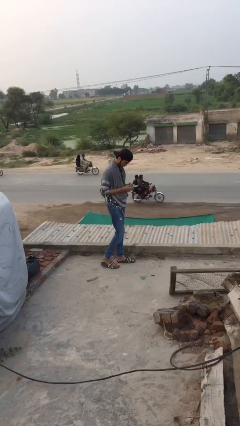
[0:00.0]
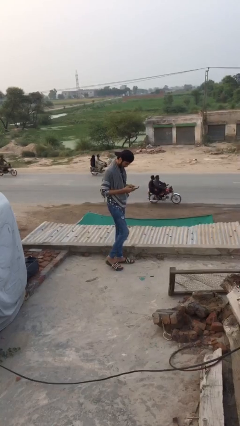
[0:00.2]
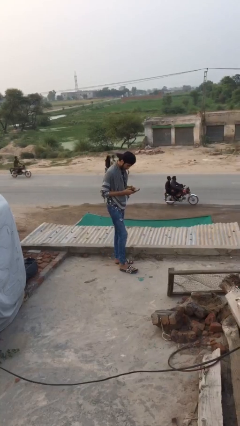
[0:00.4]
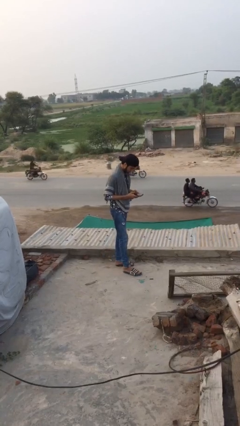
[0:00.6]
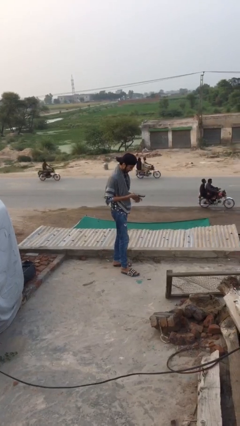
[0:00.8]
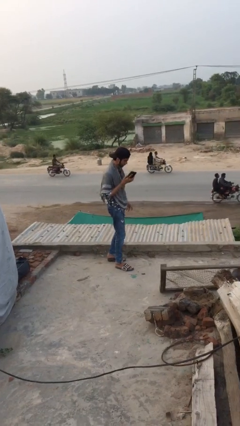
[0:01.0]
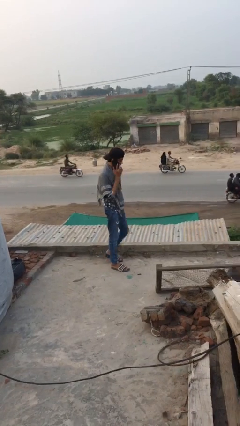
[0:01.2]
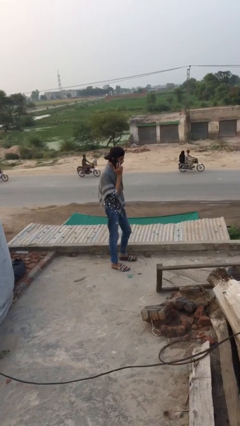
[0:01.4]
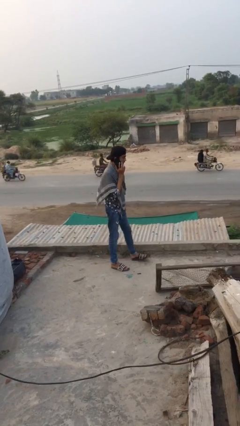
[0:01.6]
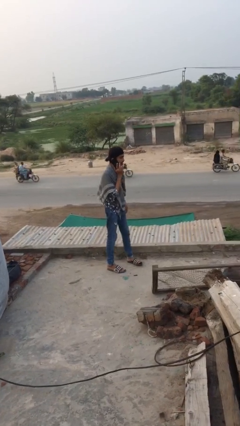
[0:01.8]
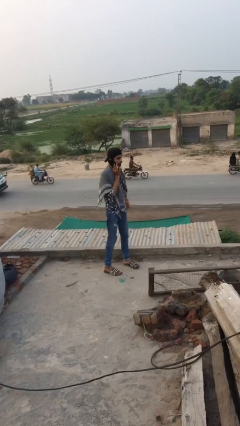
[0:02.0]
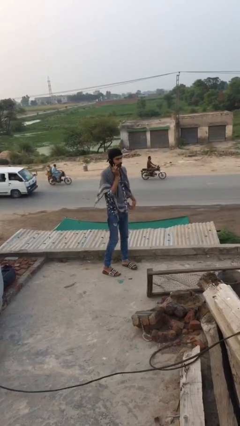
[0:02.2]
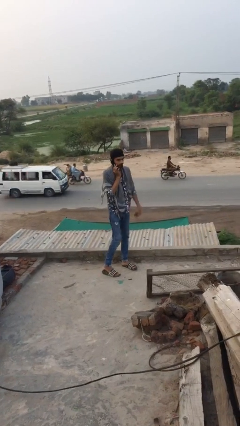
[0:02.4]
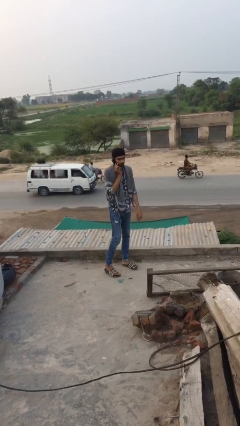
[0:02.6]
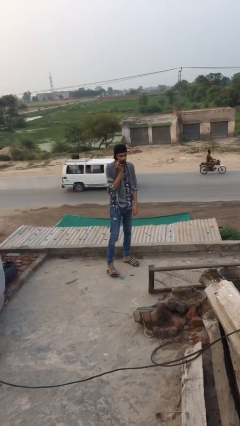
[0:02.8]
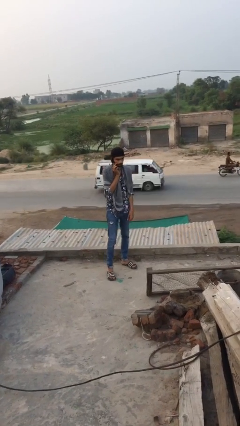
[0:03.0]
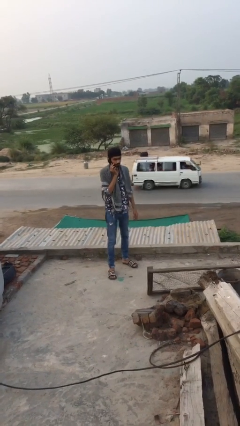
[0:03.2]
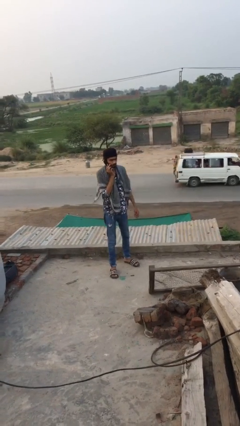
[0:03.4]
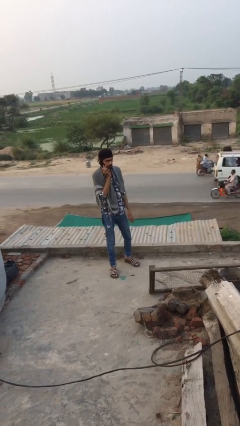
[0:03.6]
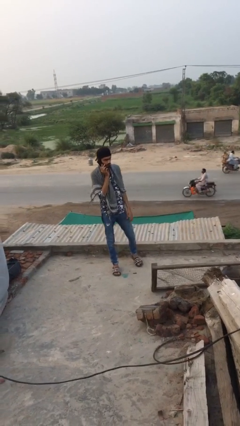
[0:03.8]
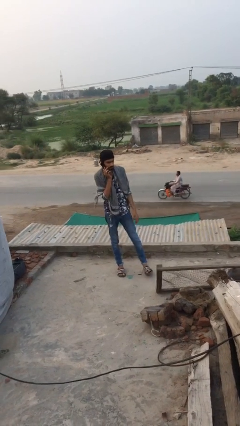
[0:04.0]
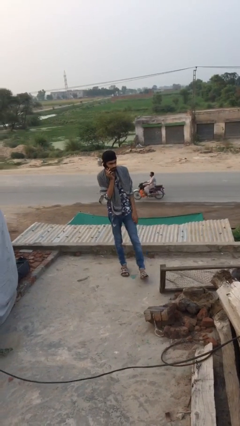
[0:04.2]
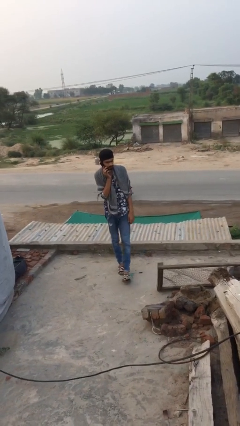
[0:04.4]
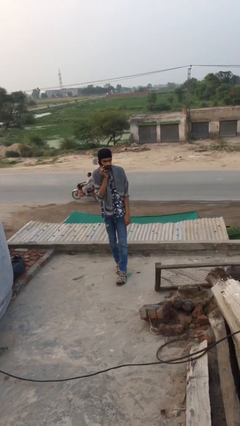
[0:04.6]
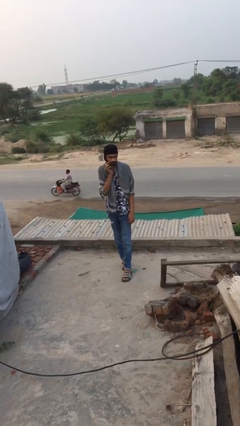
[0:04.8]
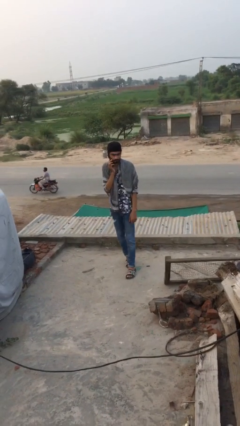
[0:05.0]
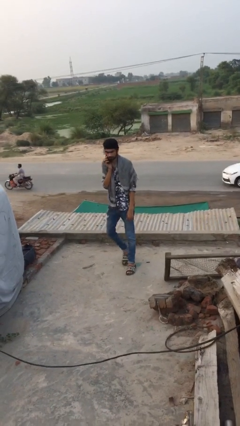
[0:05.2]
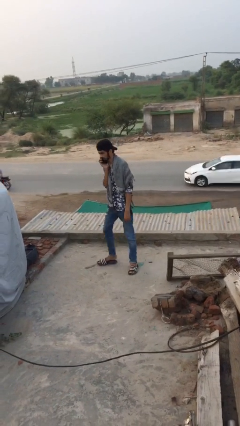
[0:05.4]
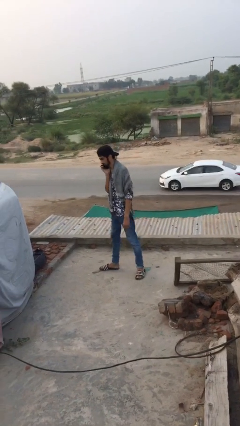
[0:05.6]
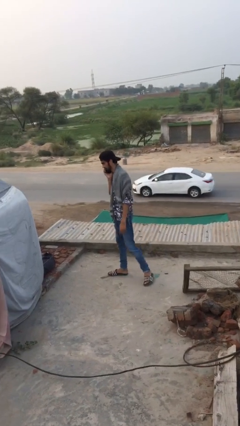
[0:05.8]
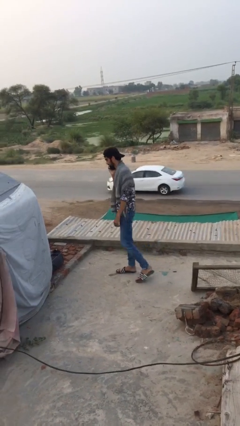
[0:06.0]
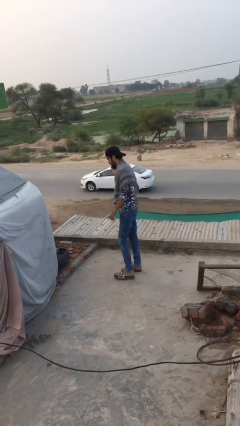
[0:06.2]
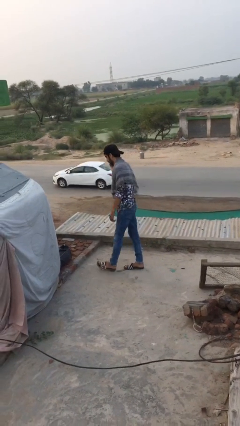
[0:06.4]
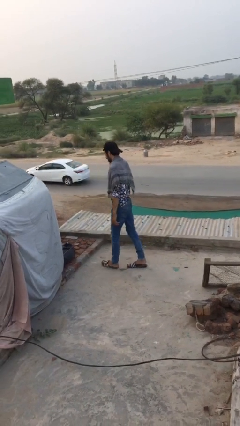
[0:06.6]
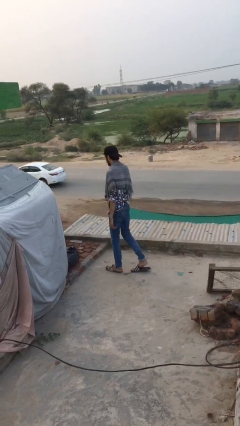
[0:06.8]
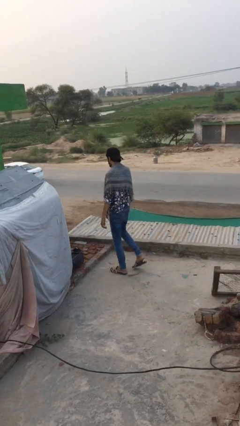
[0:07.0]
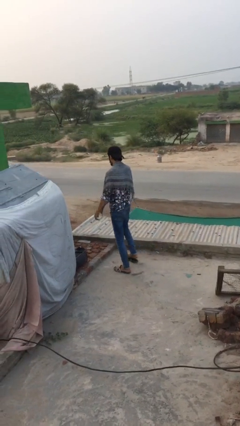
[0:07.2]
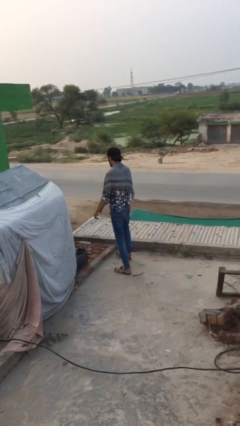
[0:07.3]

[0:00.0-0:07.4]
person talks on phone

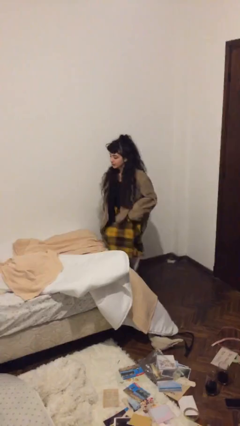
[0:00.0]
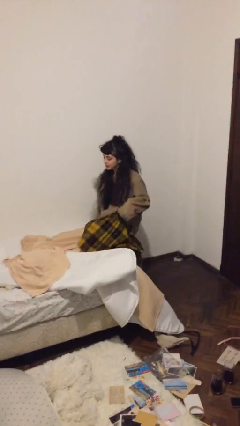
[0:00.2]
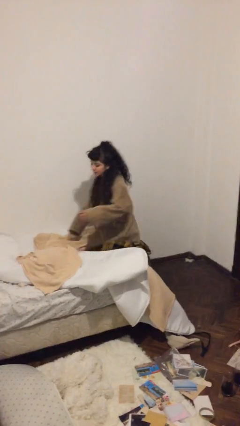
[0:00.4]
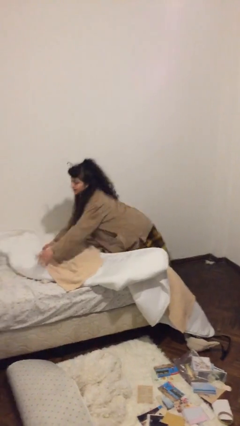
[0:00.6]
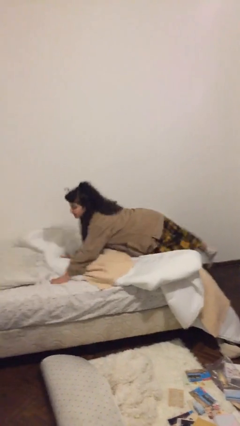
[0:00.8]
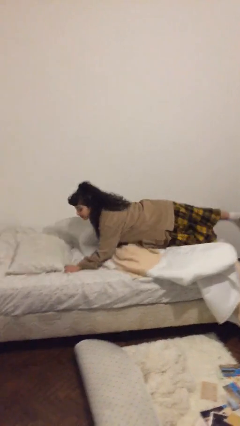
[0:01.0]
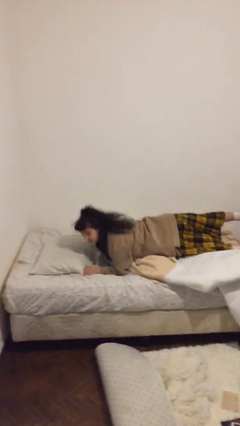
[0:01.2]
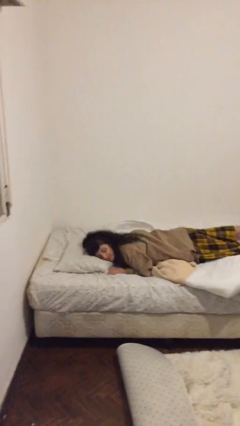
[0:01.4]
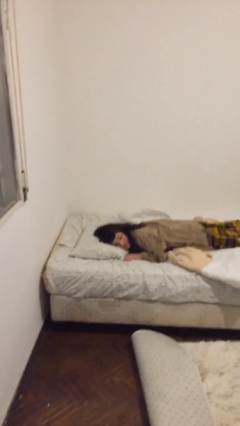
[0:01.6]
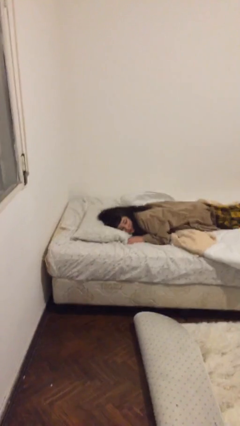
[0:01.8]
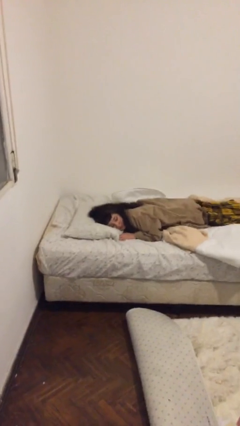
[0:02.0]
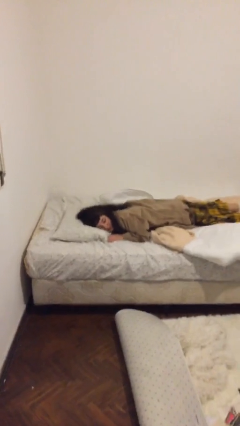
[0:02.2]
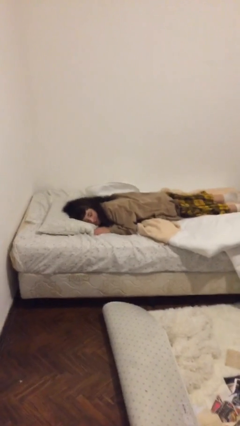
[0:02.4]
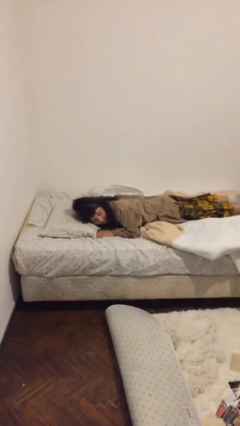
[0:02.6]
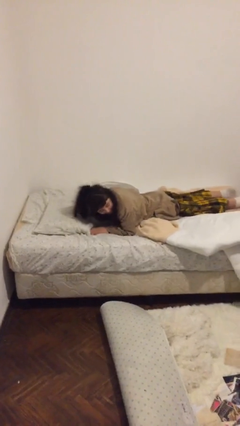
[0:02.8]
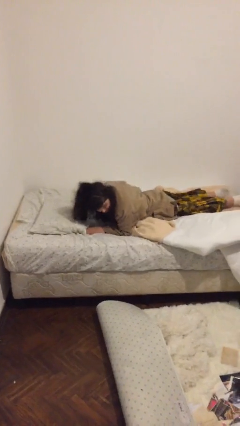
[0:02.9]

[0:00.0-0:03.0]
person lies down on bed

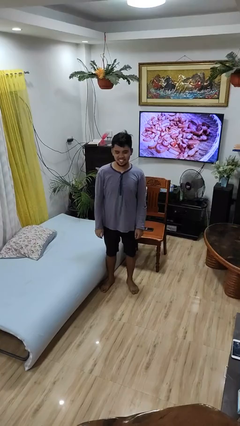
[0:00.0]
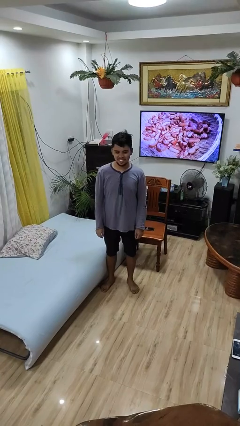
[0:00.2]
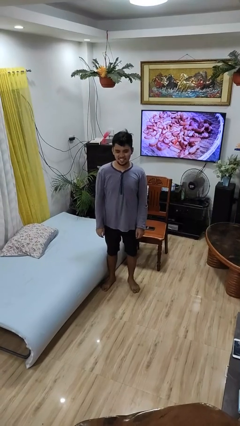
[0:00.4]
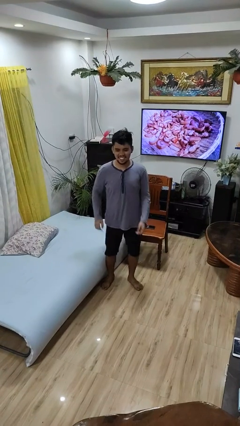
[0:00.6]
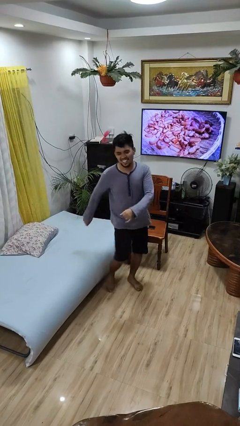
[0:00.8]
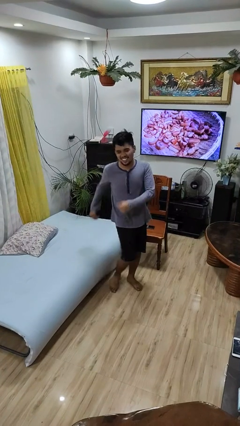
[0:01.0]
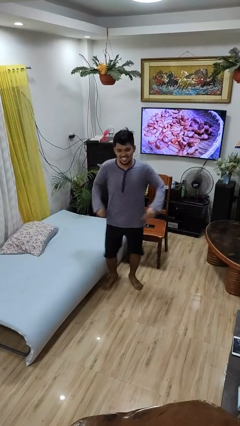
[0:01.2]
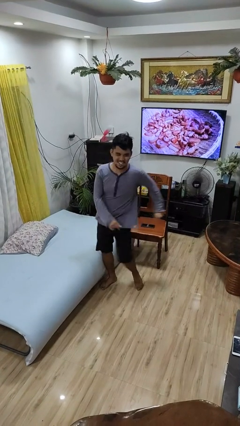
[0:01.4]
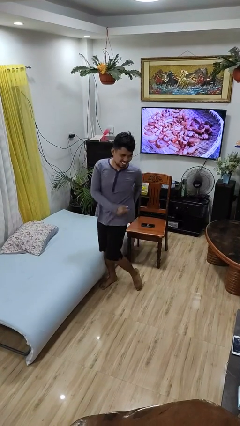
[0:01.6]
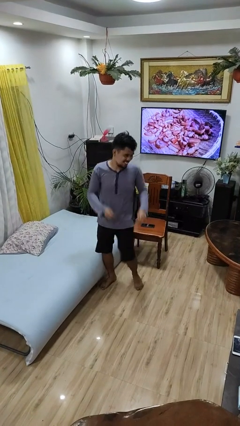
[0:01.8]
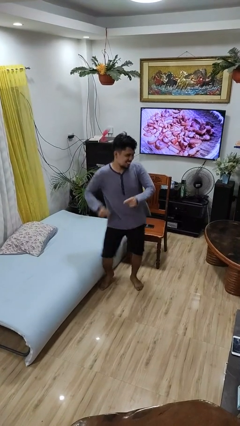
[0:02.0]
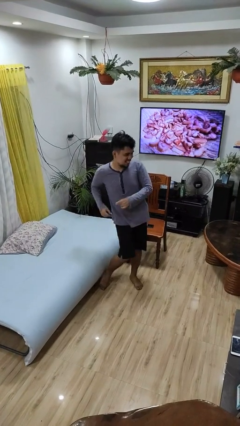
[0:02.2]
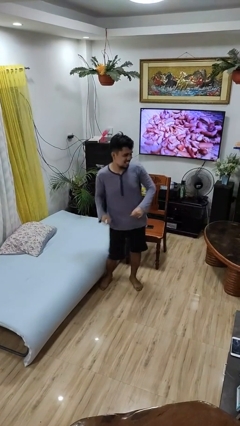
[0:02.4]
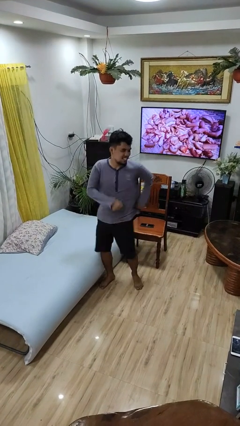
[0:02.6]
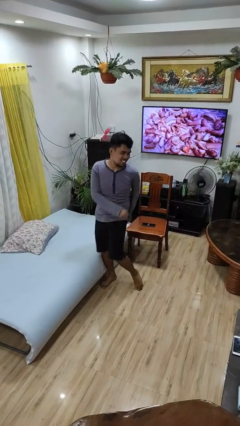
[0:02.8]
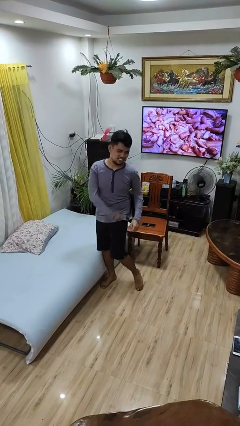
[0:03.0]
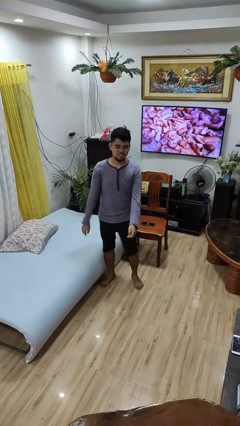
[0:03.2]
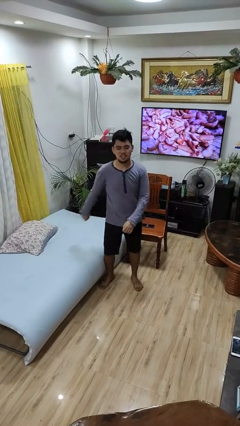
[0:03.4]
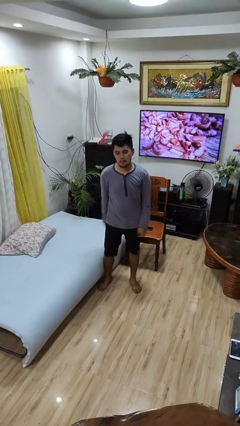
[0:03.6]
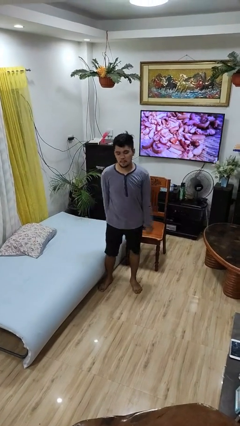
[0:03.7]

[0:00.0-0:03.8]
person dances in place

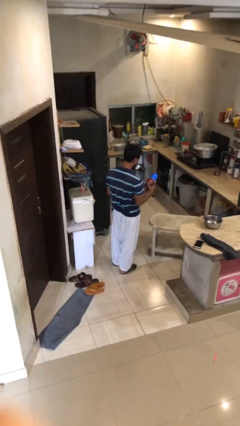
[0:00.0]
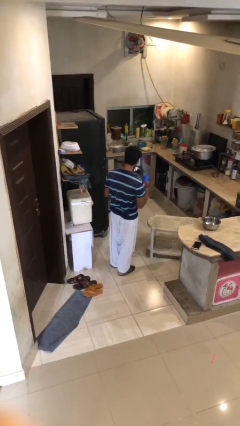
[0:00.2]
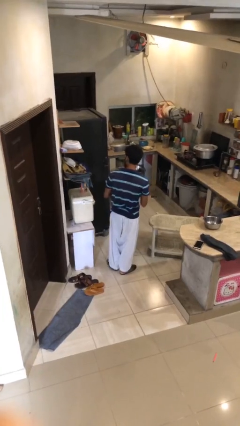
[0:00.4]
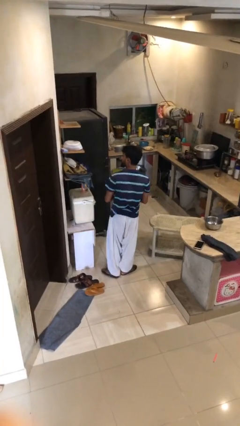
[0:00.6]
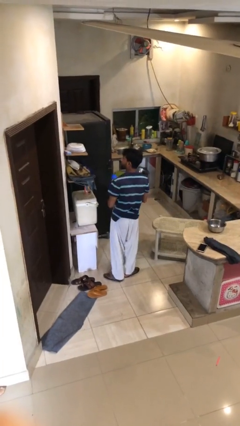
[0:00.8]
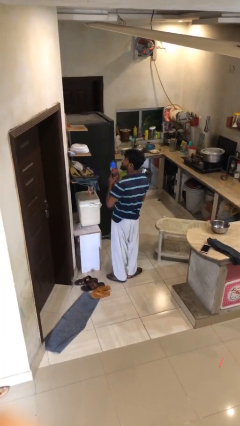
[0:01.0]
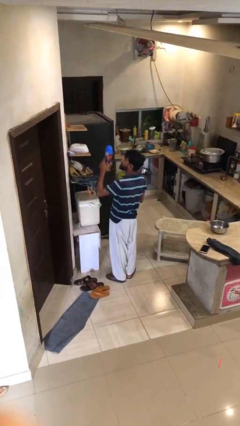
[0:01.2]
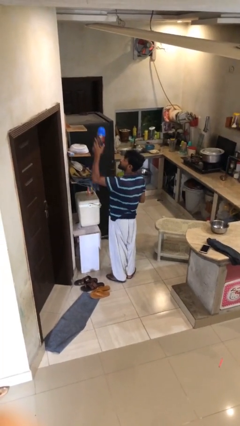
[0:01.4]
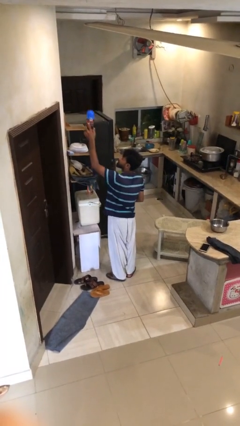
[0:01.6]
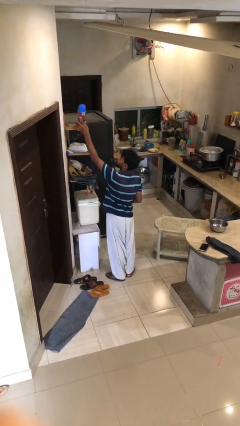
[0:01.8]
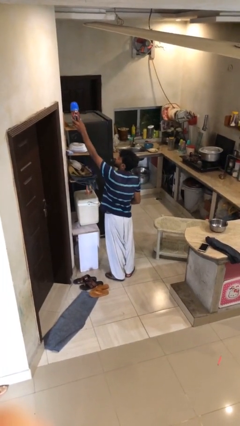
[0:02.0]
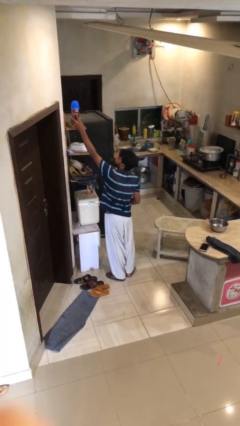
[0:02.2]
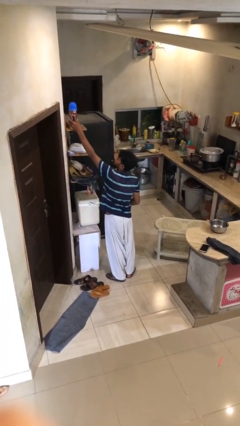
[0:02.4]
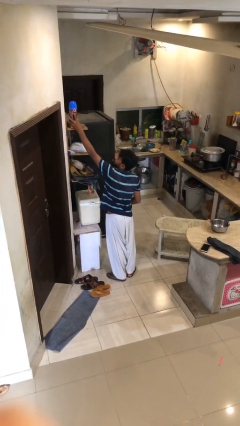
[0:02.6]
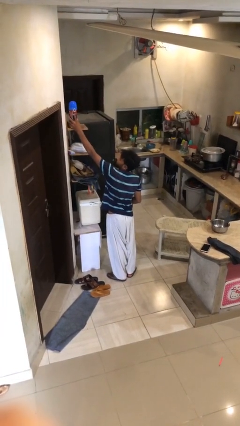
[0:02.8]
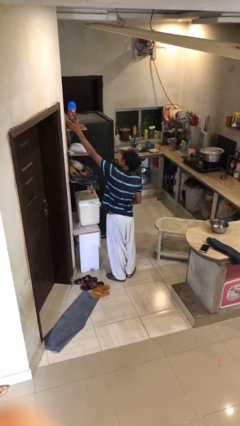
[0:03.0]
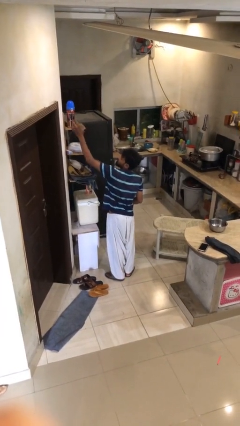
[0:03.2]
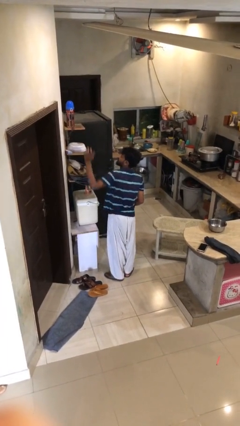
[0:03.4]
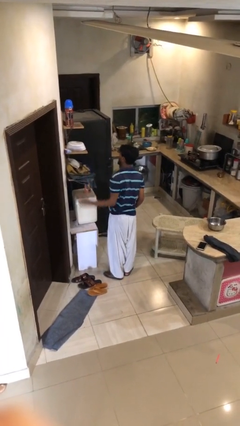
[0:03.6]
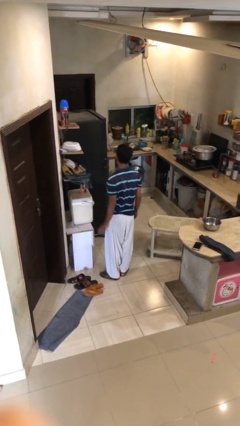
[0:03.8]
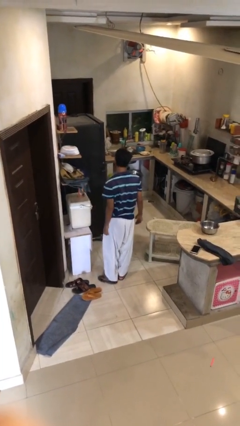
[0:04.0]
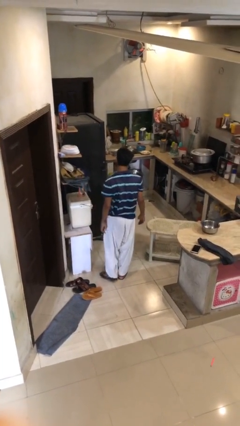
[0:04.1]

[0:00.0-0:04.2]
person puts down object on shelf
